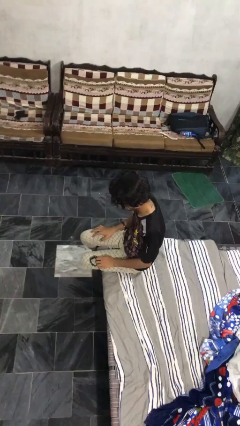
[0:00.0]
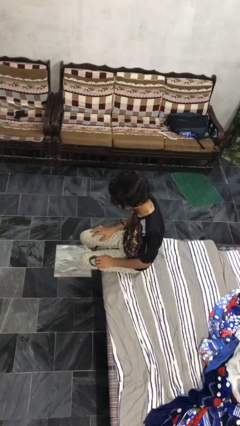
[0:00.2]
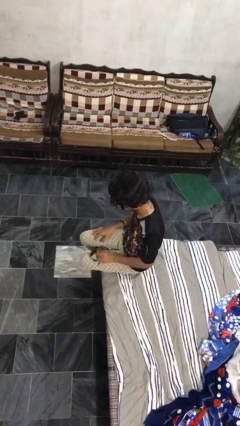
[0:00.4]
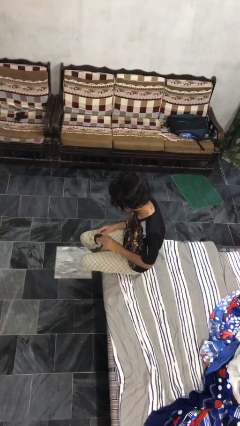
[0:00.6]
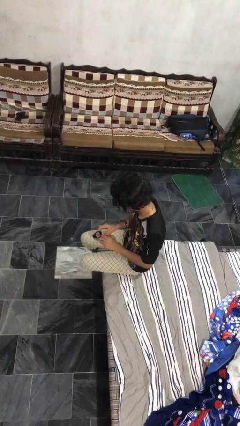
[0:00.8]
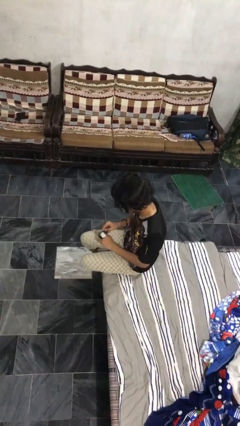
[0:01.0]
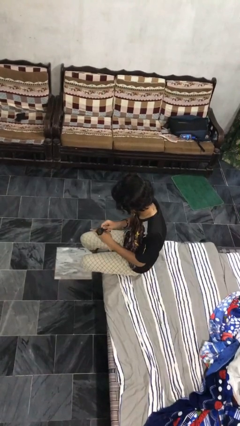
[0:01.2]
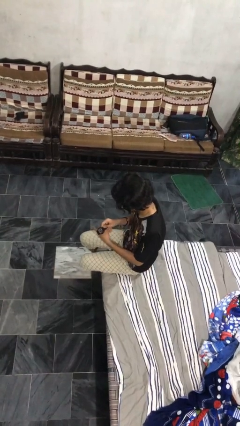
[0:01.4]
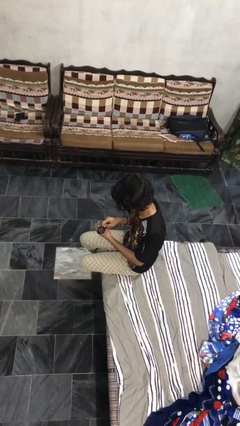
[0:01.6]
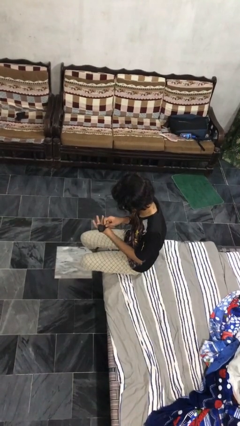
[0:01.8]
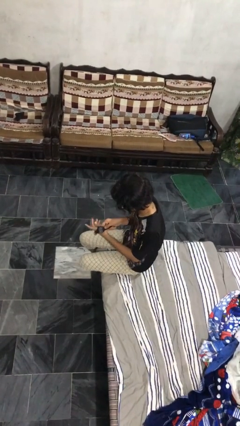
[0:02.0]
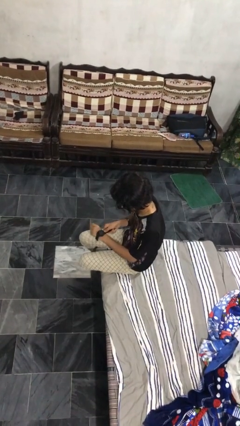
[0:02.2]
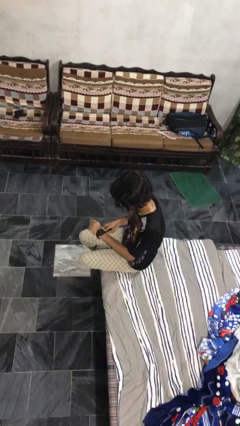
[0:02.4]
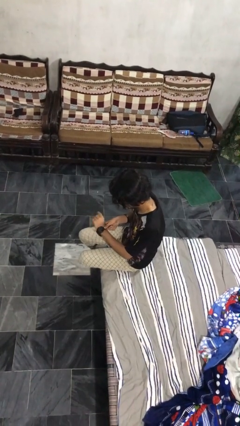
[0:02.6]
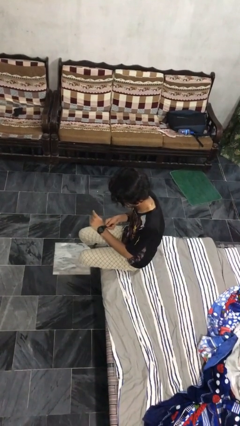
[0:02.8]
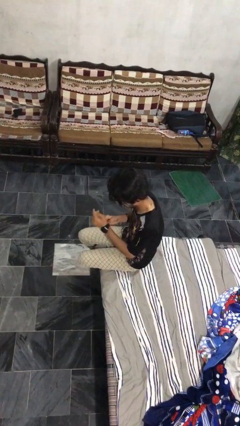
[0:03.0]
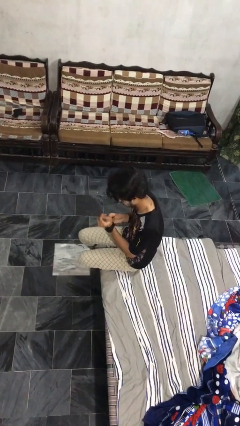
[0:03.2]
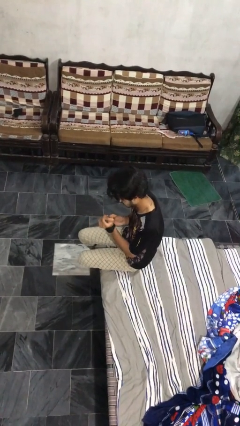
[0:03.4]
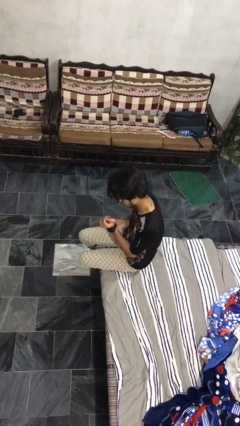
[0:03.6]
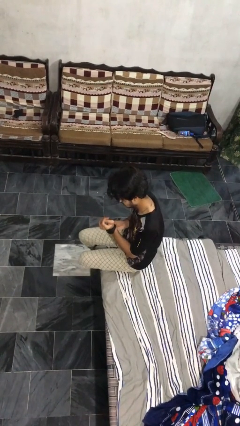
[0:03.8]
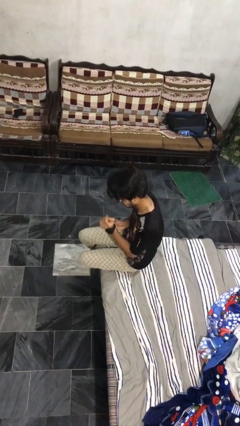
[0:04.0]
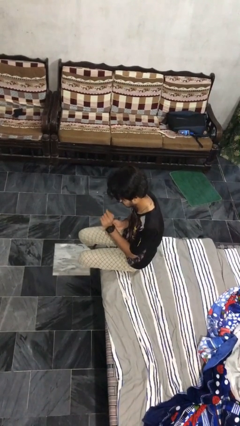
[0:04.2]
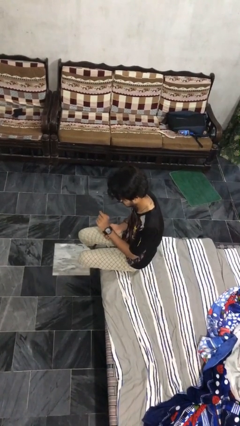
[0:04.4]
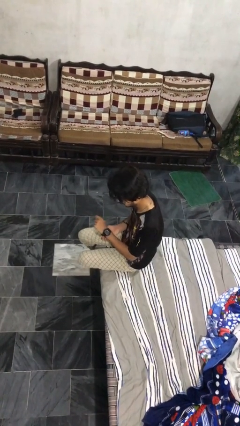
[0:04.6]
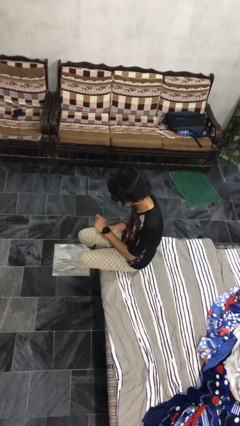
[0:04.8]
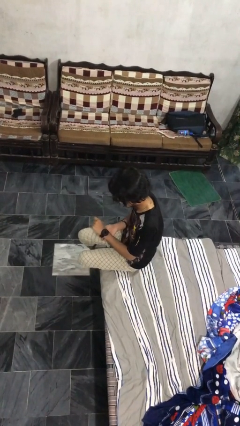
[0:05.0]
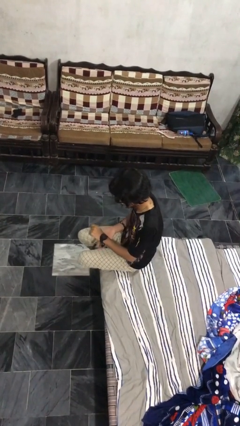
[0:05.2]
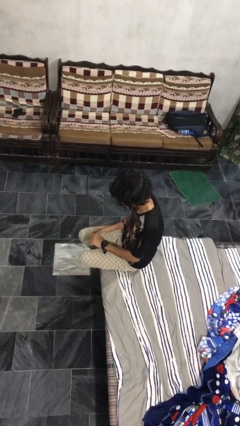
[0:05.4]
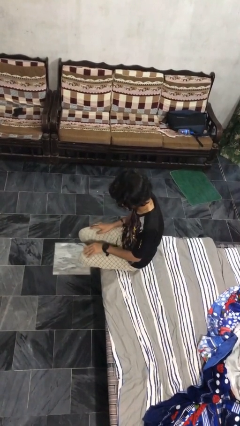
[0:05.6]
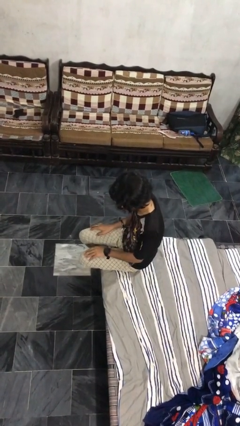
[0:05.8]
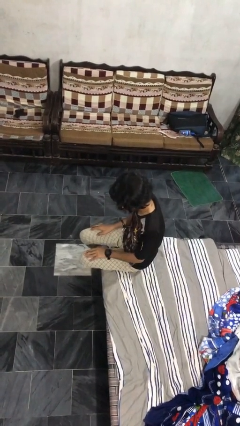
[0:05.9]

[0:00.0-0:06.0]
person puts on wristwatch

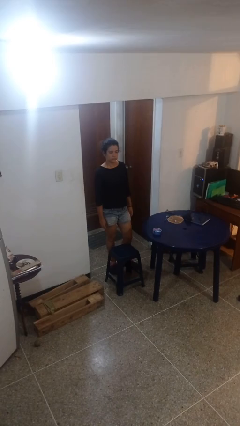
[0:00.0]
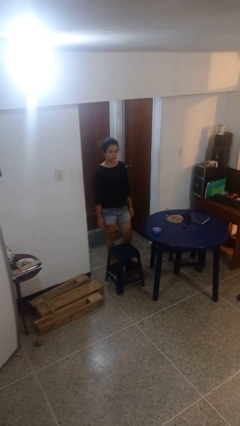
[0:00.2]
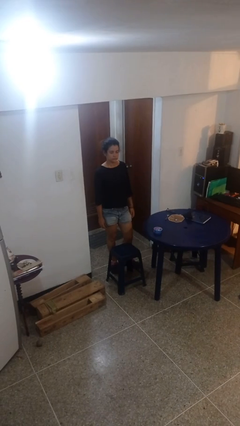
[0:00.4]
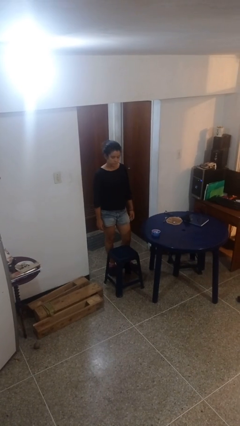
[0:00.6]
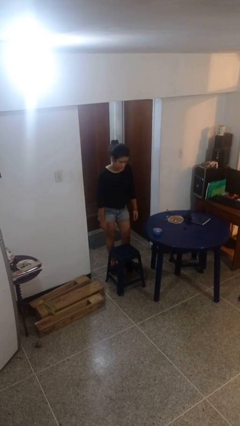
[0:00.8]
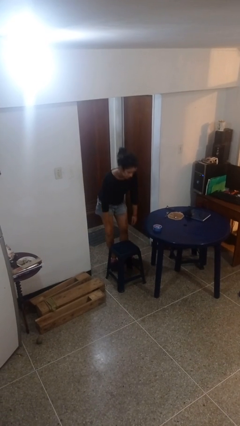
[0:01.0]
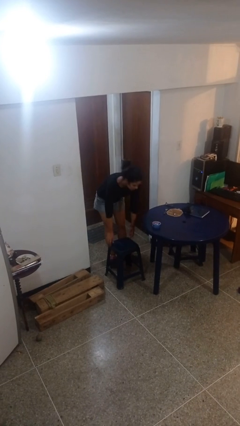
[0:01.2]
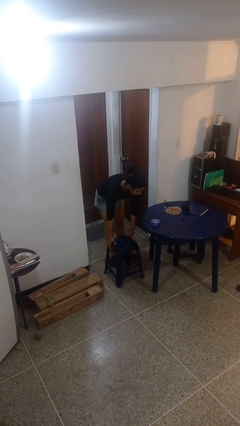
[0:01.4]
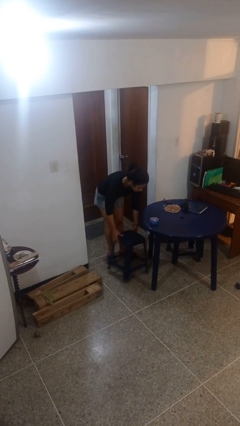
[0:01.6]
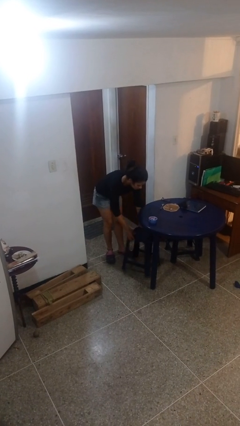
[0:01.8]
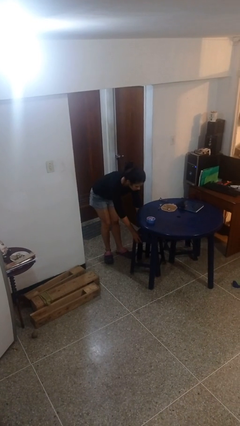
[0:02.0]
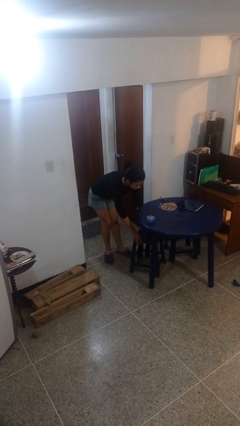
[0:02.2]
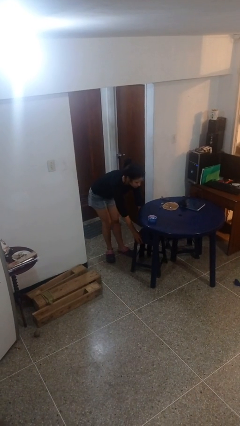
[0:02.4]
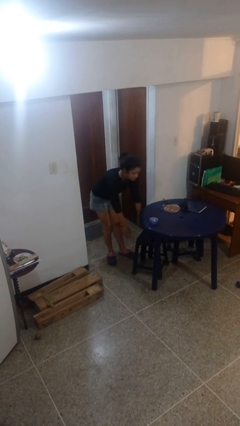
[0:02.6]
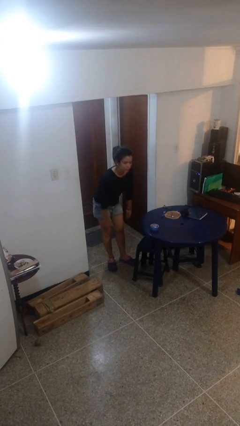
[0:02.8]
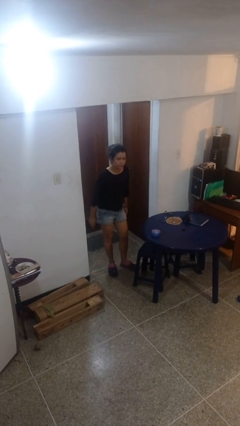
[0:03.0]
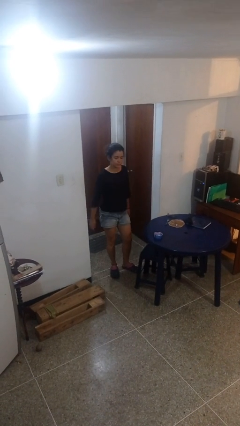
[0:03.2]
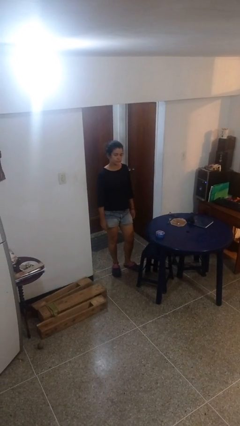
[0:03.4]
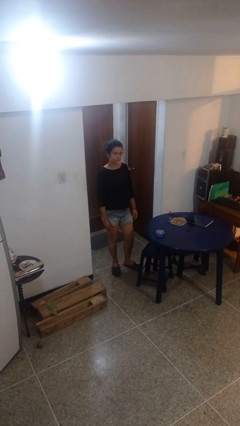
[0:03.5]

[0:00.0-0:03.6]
person pushes in chair

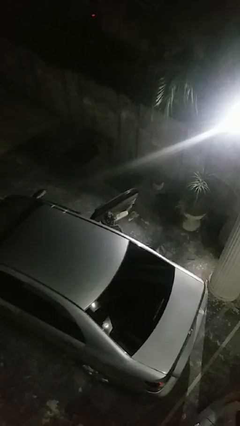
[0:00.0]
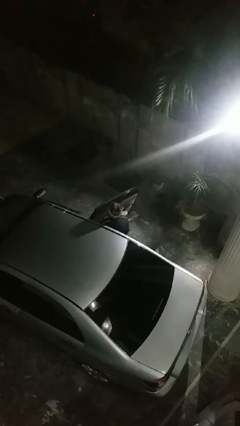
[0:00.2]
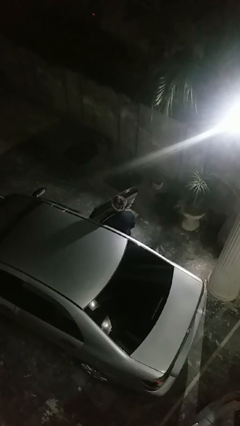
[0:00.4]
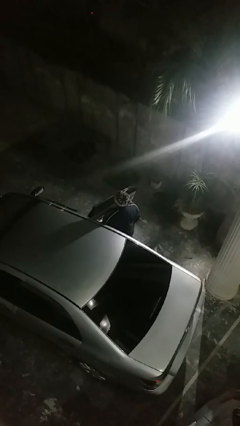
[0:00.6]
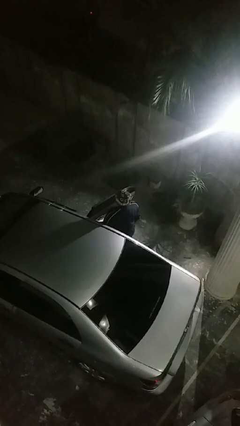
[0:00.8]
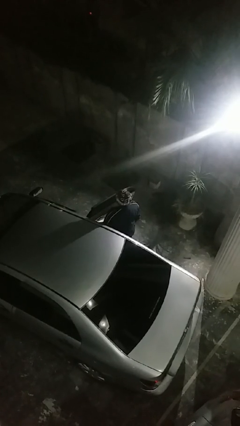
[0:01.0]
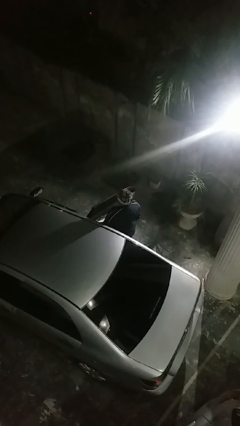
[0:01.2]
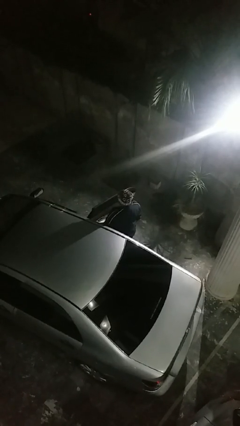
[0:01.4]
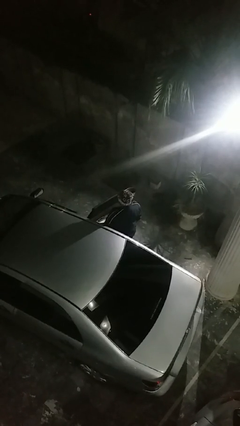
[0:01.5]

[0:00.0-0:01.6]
person exits car

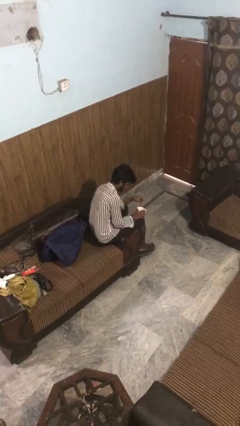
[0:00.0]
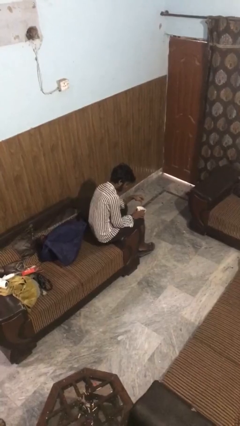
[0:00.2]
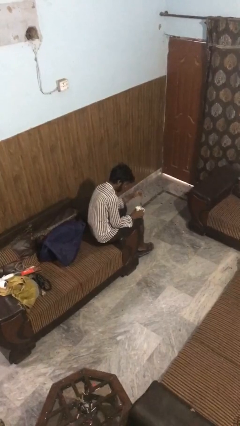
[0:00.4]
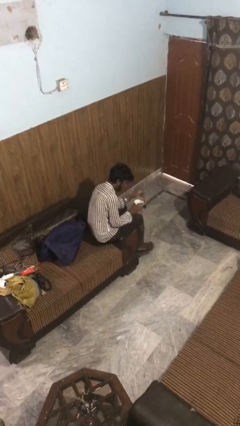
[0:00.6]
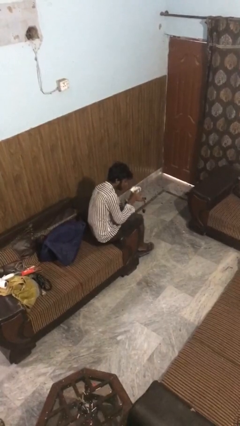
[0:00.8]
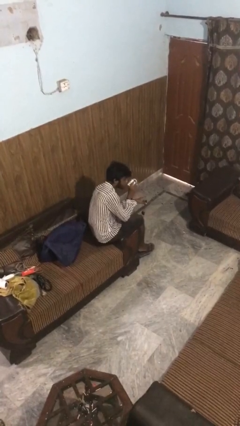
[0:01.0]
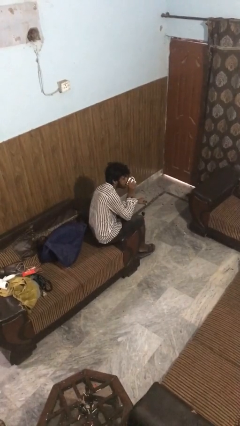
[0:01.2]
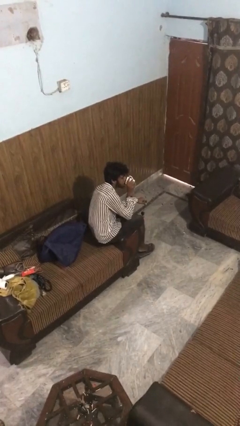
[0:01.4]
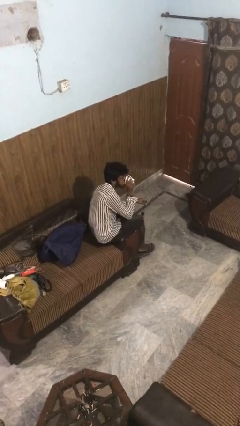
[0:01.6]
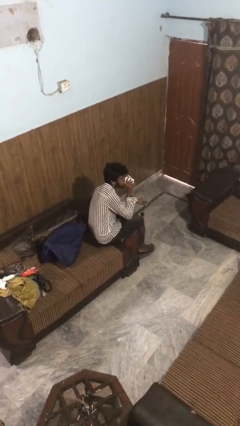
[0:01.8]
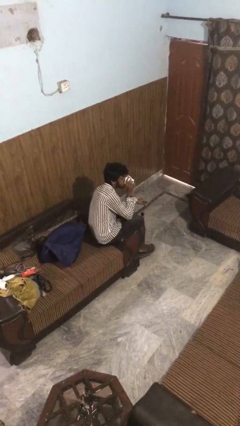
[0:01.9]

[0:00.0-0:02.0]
person drinks from mug

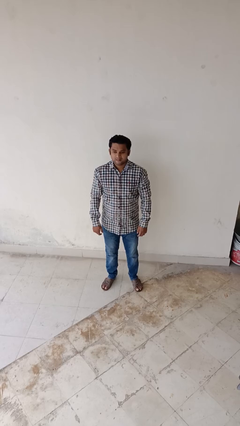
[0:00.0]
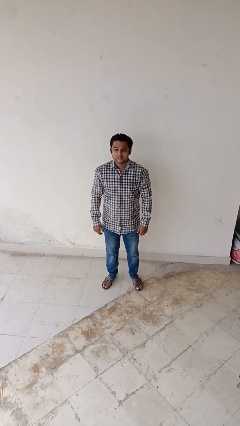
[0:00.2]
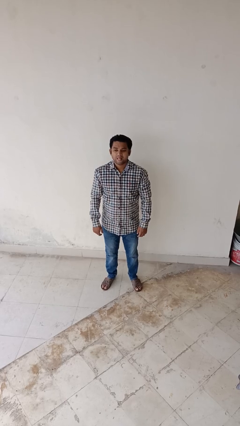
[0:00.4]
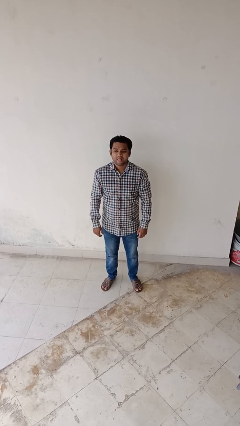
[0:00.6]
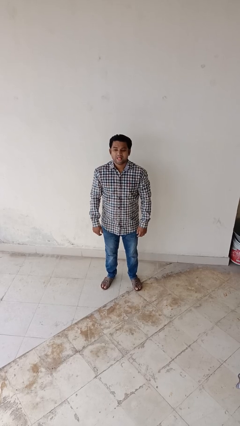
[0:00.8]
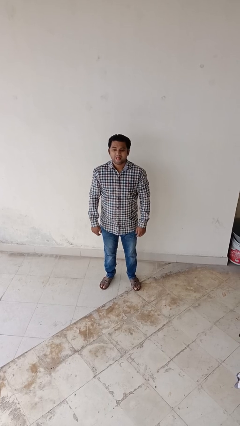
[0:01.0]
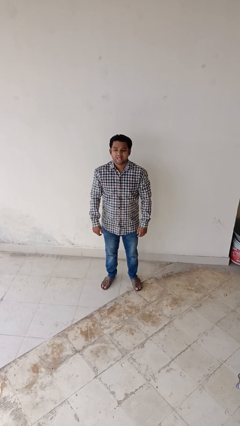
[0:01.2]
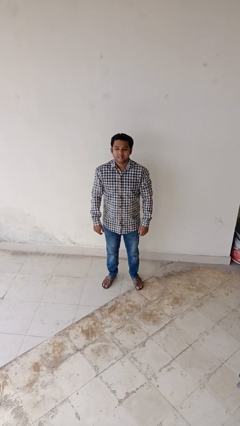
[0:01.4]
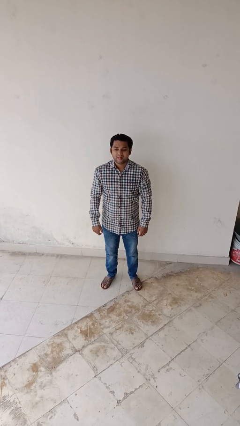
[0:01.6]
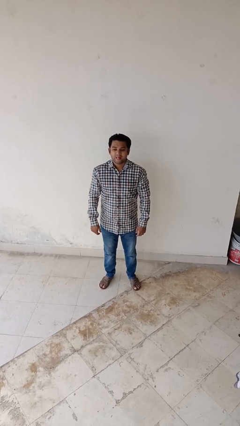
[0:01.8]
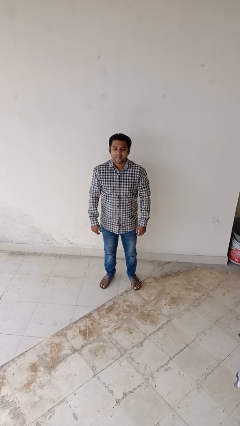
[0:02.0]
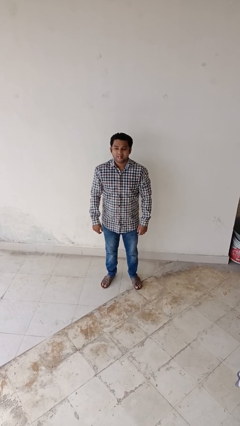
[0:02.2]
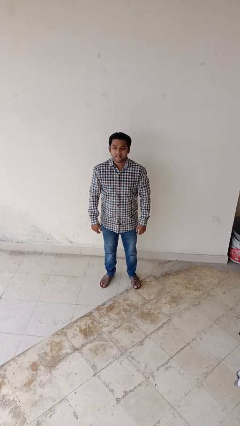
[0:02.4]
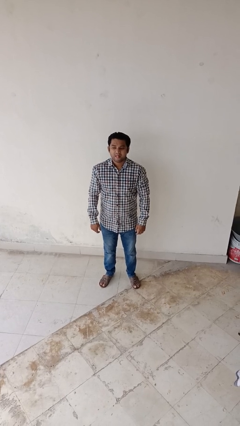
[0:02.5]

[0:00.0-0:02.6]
person sticks out tongue

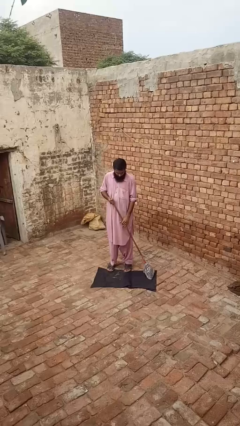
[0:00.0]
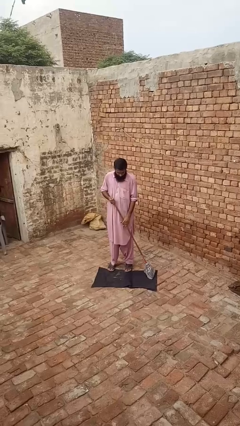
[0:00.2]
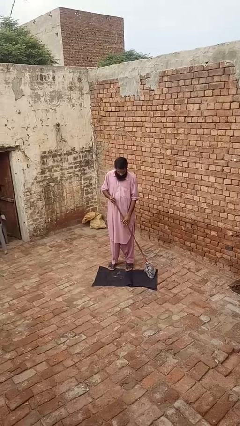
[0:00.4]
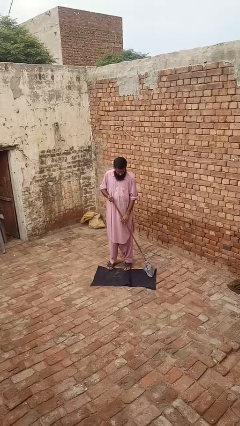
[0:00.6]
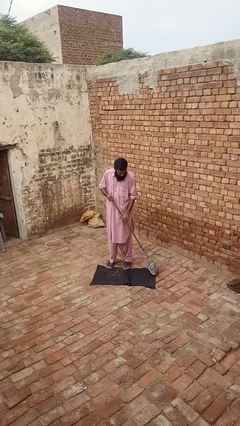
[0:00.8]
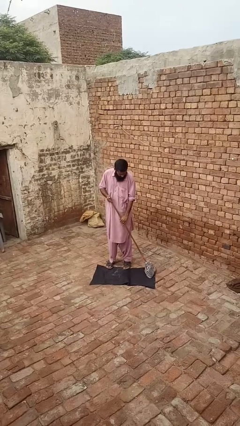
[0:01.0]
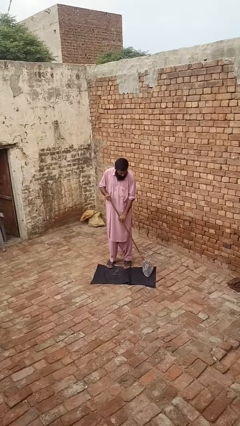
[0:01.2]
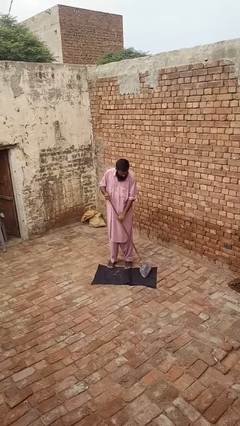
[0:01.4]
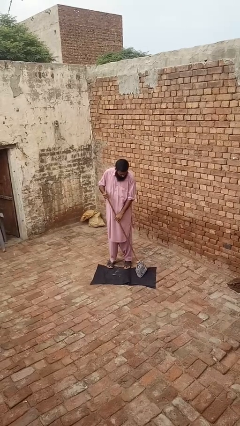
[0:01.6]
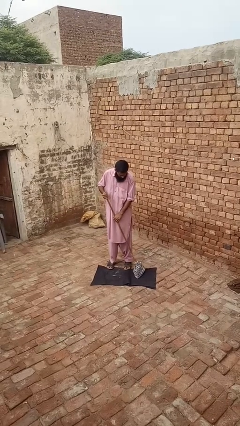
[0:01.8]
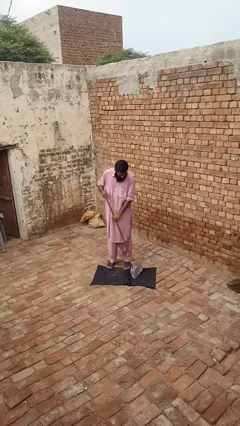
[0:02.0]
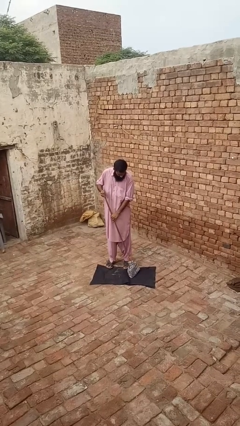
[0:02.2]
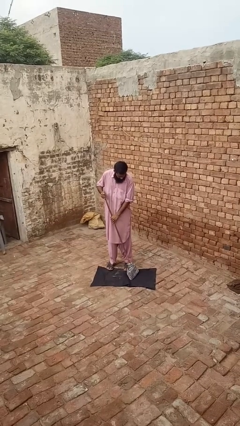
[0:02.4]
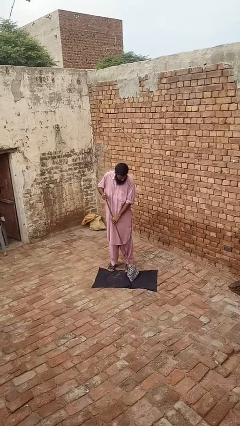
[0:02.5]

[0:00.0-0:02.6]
person vacuums carpet
